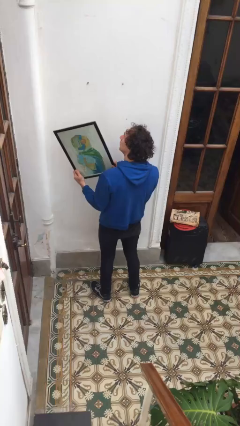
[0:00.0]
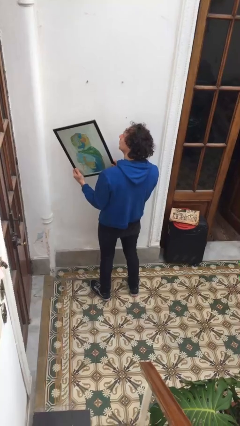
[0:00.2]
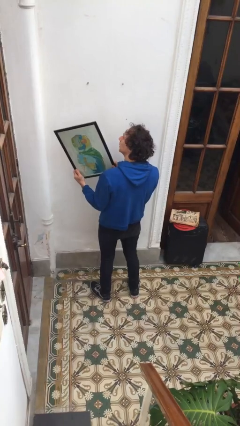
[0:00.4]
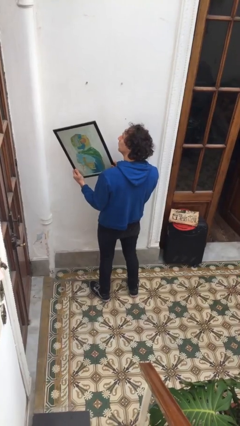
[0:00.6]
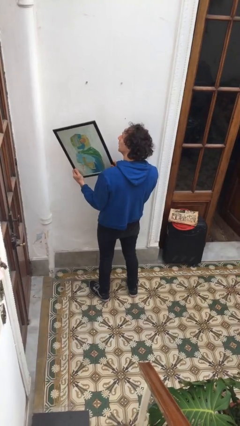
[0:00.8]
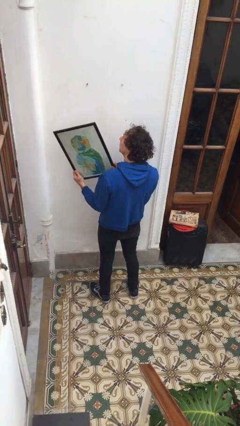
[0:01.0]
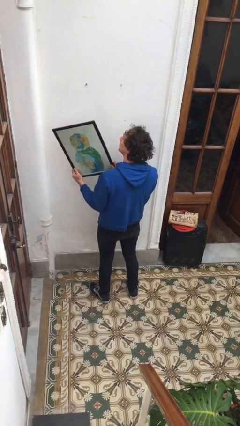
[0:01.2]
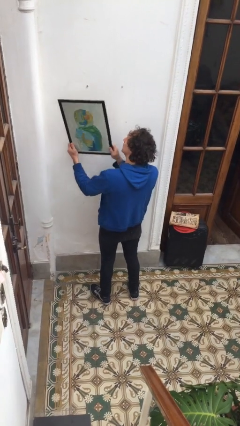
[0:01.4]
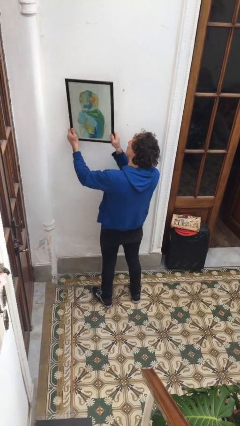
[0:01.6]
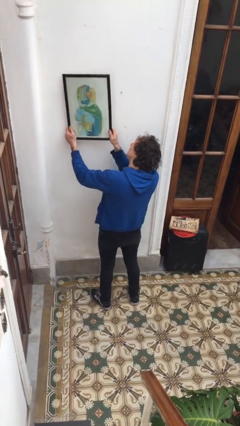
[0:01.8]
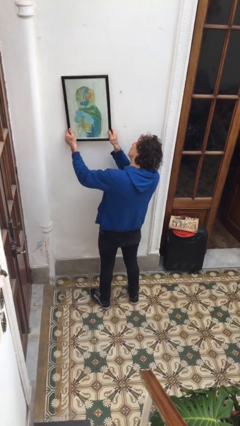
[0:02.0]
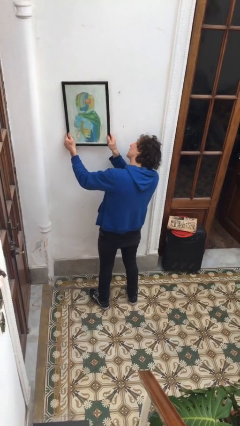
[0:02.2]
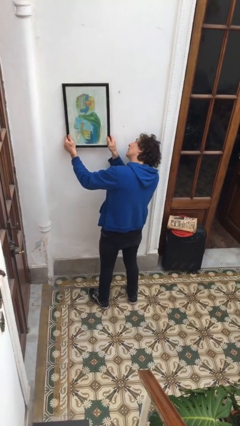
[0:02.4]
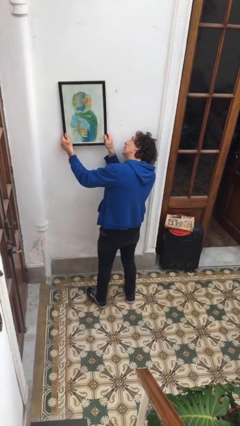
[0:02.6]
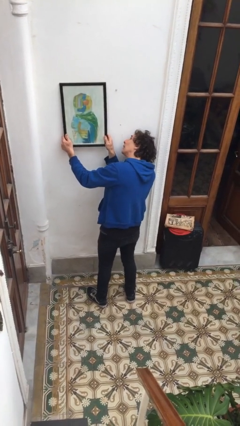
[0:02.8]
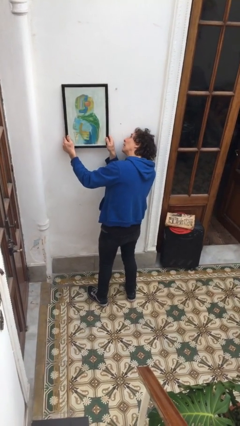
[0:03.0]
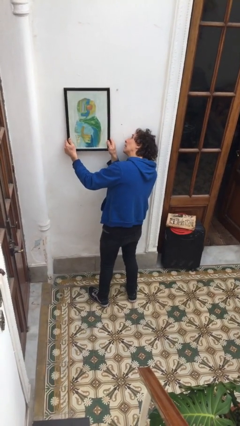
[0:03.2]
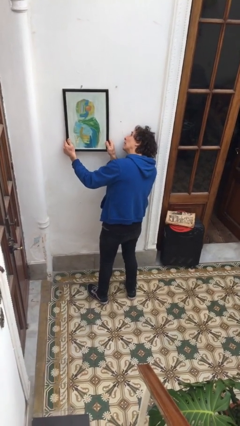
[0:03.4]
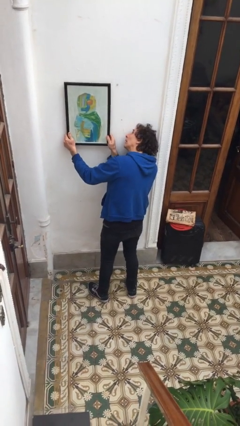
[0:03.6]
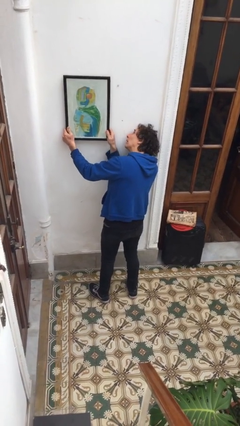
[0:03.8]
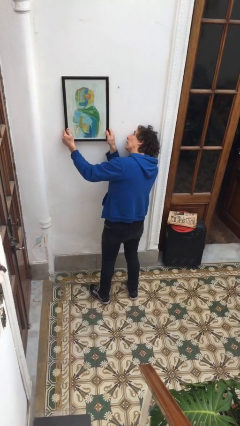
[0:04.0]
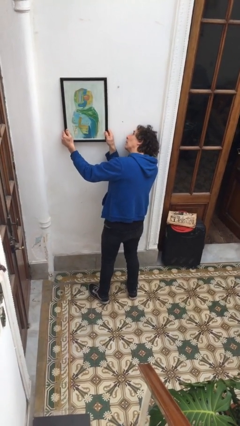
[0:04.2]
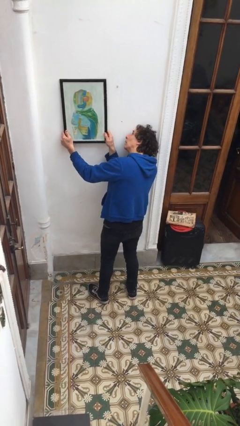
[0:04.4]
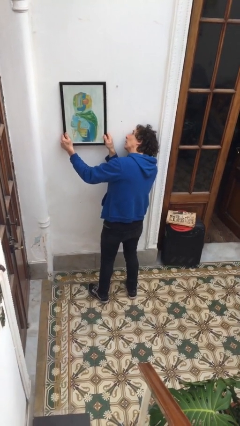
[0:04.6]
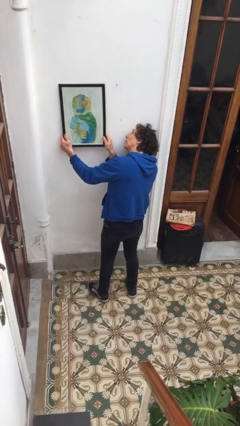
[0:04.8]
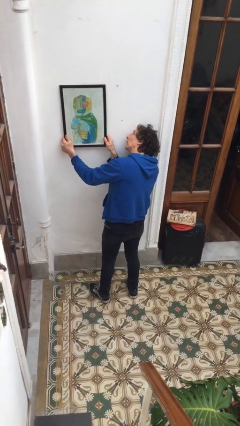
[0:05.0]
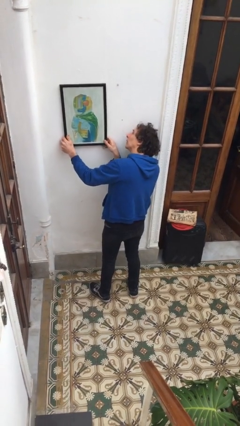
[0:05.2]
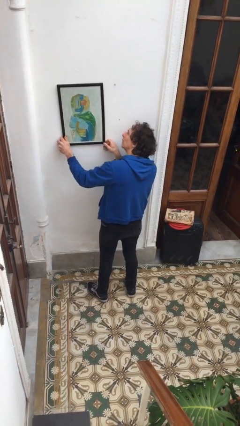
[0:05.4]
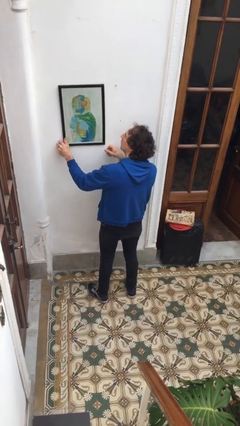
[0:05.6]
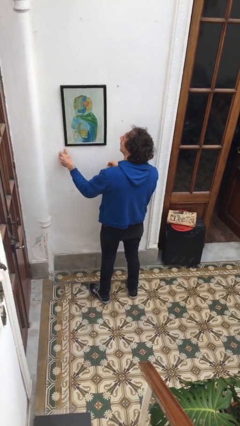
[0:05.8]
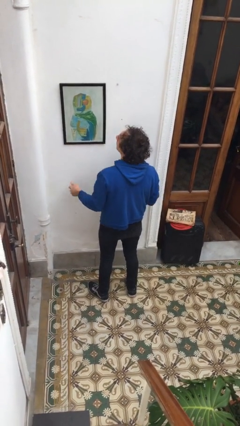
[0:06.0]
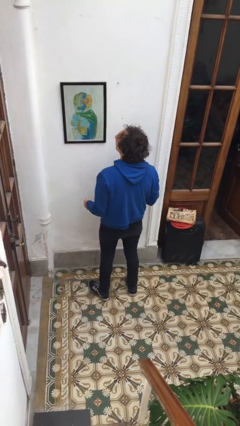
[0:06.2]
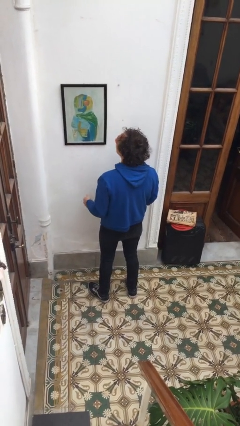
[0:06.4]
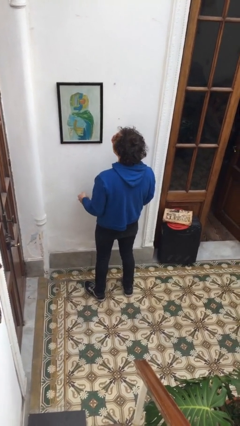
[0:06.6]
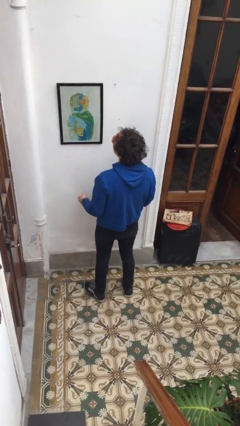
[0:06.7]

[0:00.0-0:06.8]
person puts up picture frame

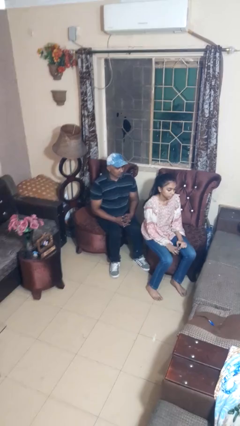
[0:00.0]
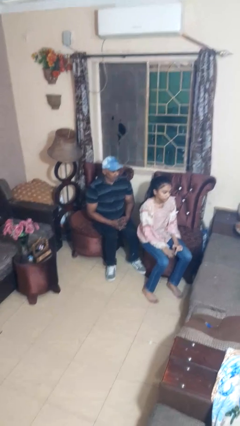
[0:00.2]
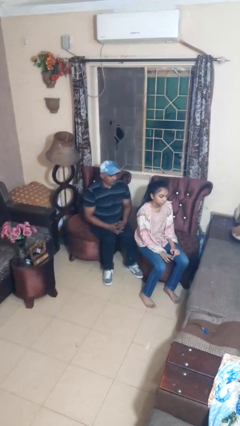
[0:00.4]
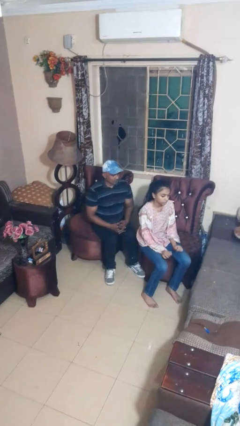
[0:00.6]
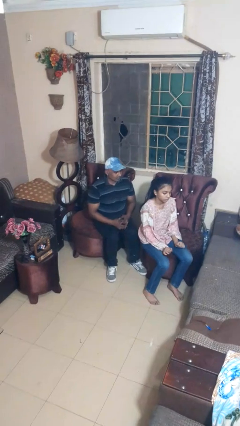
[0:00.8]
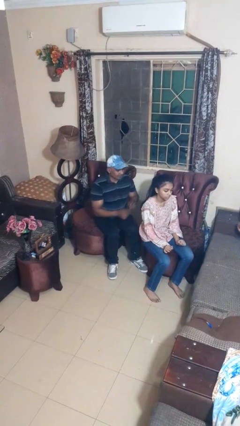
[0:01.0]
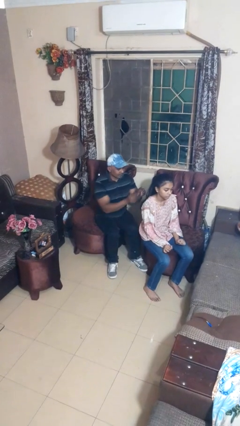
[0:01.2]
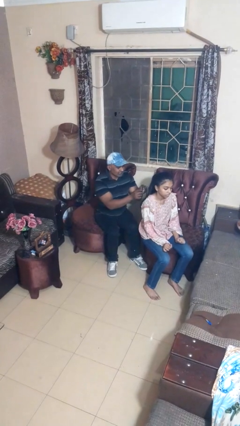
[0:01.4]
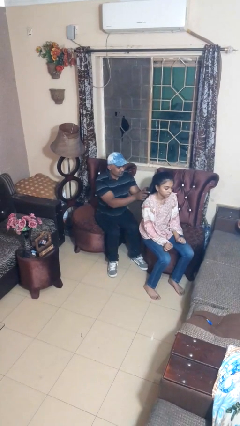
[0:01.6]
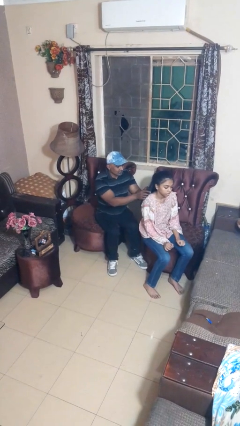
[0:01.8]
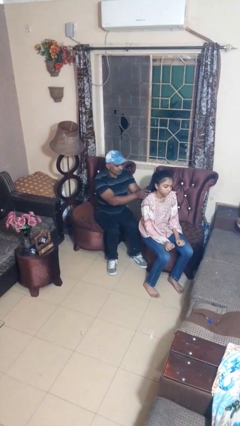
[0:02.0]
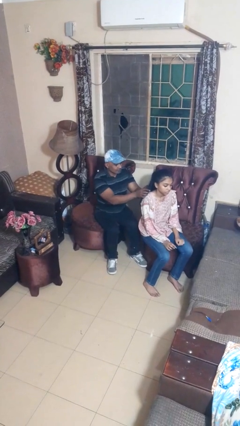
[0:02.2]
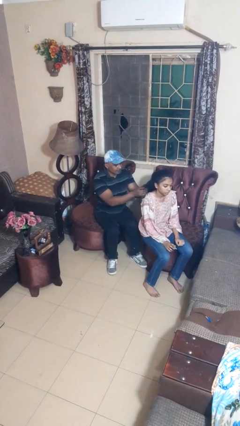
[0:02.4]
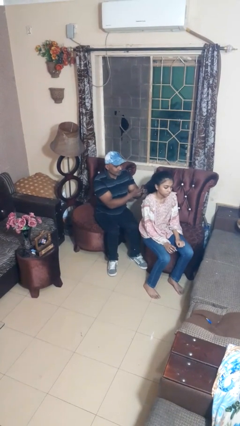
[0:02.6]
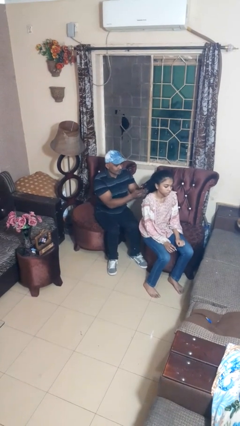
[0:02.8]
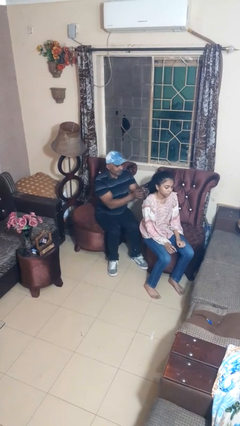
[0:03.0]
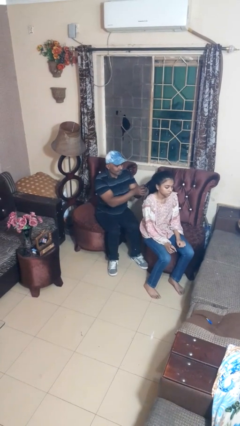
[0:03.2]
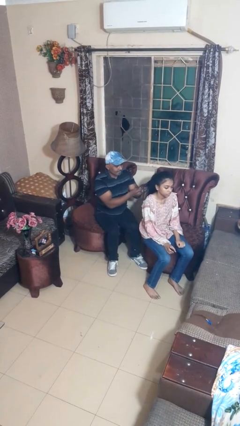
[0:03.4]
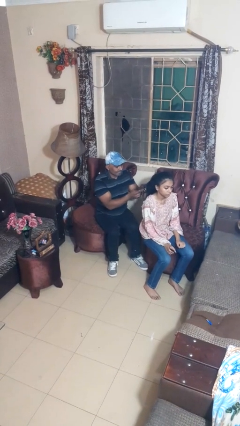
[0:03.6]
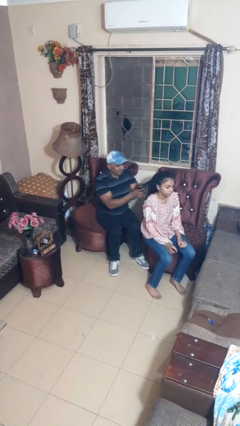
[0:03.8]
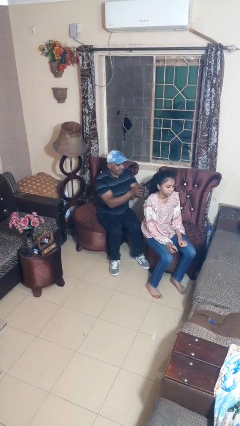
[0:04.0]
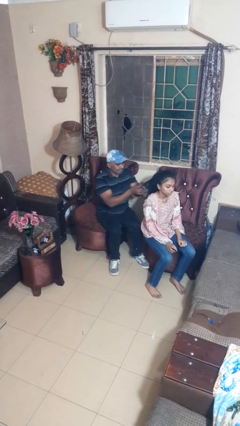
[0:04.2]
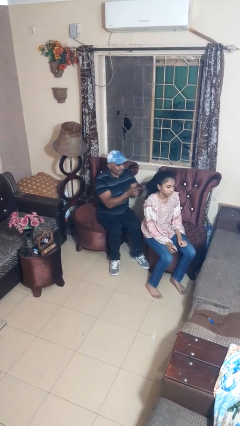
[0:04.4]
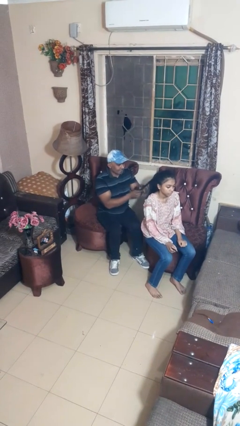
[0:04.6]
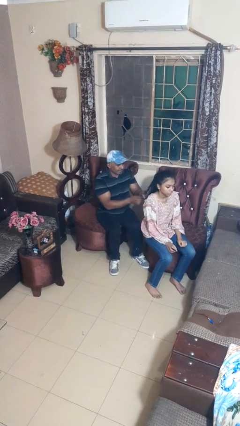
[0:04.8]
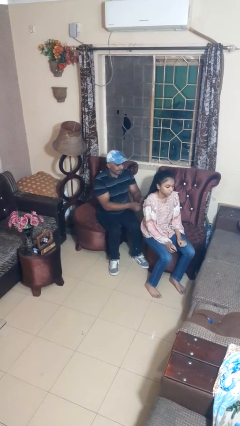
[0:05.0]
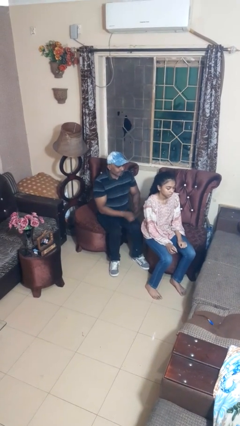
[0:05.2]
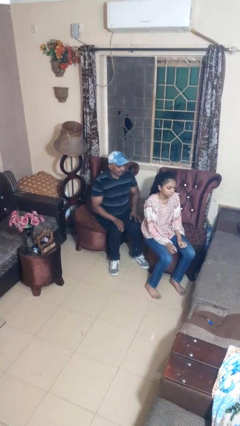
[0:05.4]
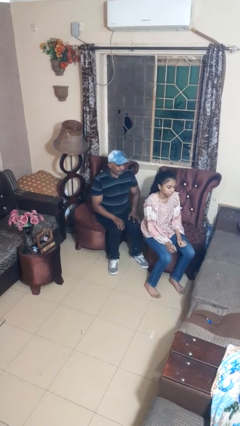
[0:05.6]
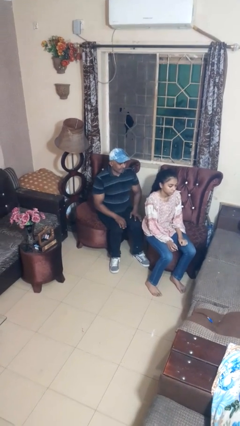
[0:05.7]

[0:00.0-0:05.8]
person braids hair of person

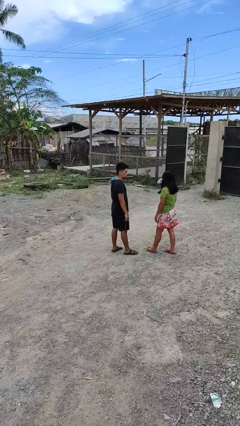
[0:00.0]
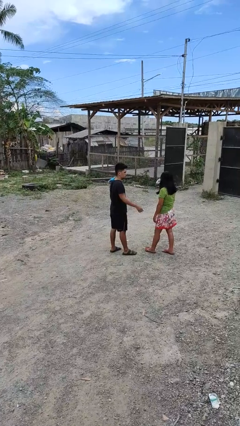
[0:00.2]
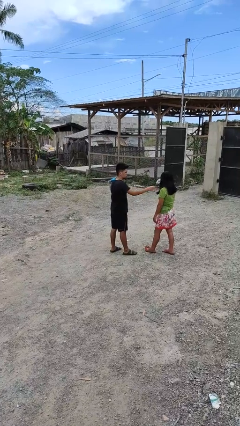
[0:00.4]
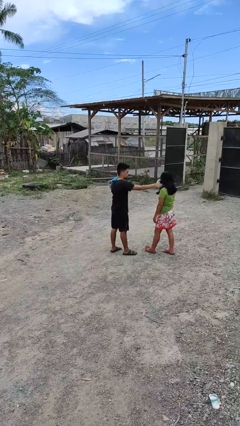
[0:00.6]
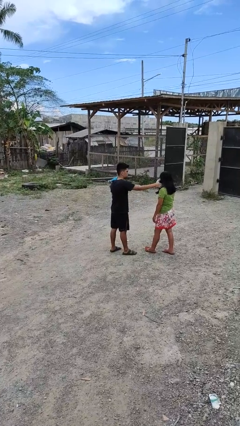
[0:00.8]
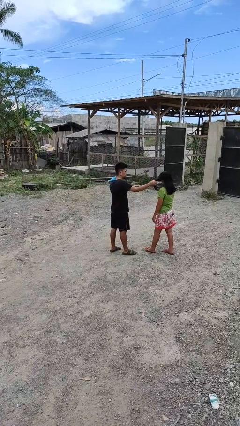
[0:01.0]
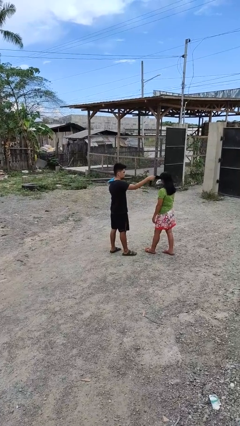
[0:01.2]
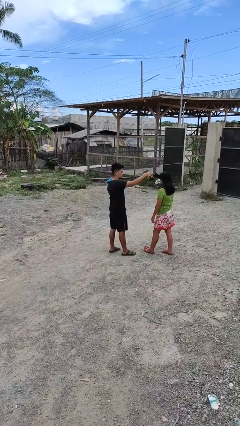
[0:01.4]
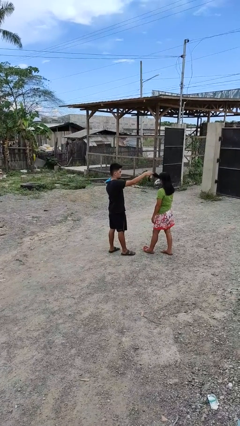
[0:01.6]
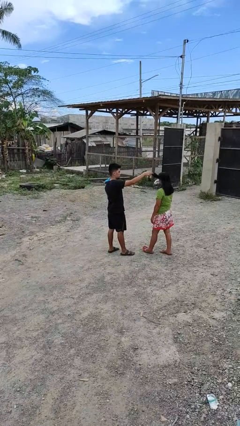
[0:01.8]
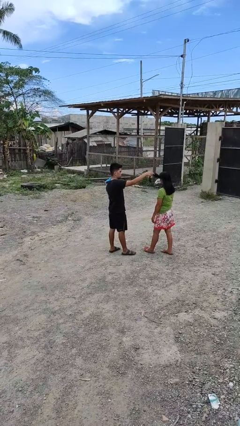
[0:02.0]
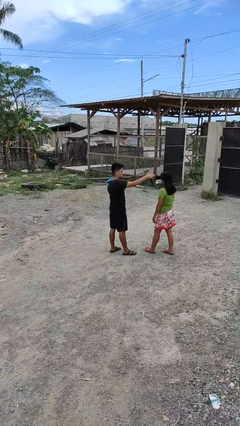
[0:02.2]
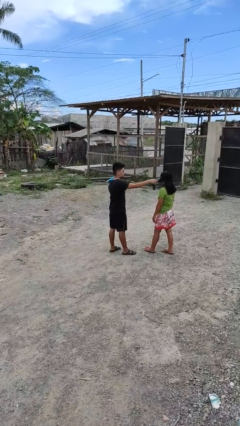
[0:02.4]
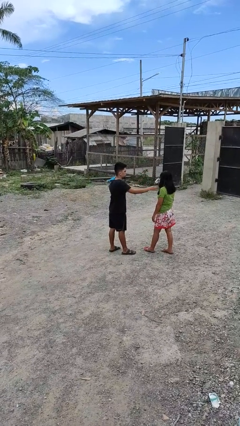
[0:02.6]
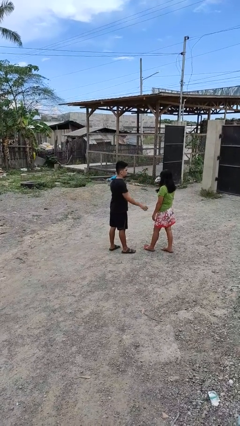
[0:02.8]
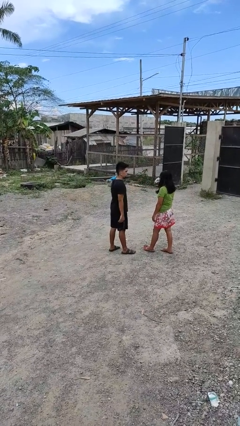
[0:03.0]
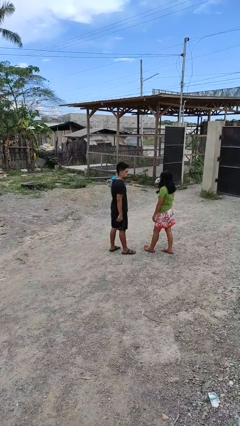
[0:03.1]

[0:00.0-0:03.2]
person grabs person by hair

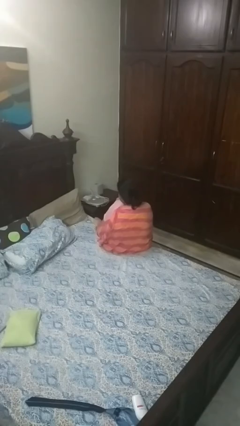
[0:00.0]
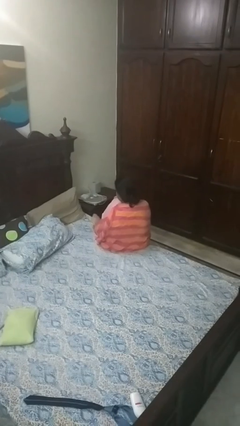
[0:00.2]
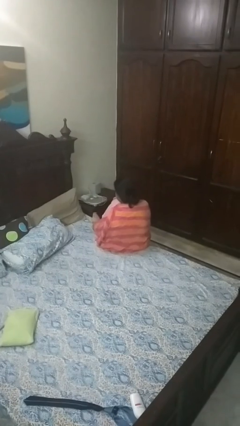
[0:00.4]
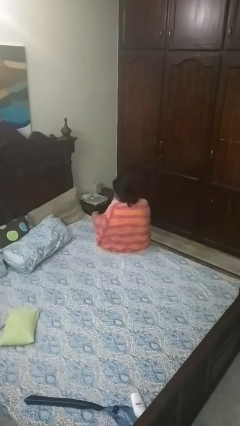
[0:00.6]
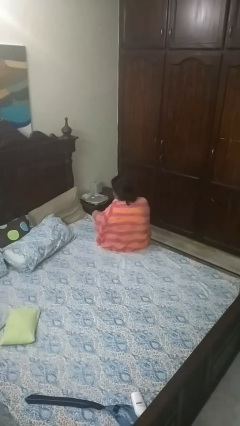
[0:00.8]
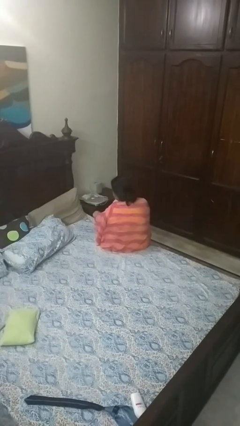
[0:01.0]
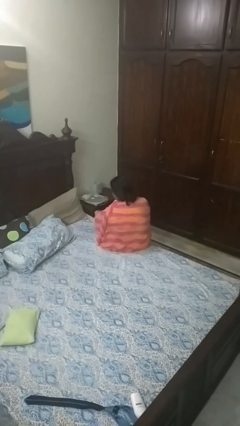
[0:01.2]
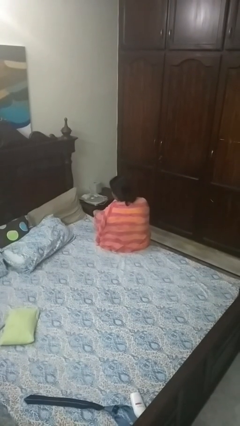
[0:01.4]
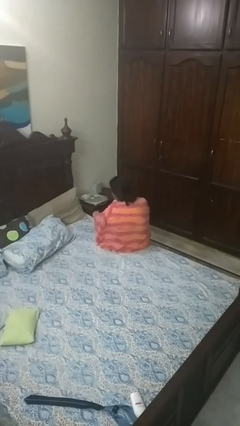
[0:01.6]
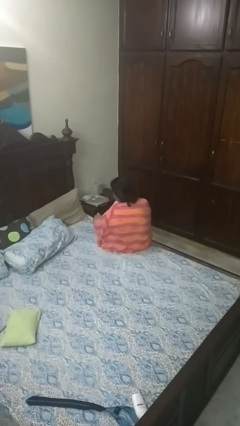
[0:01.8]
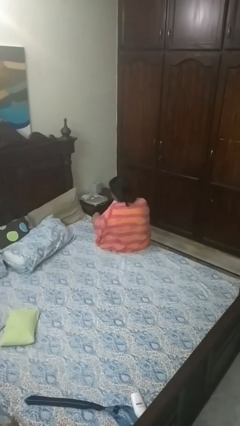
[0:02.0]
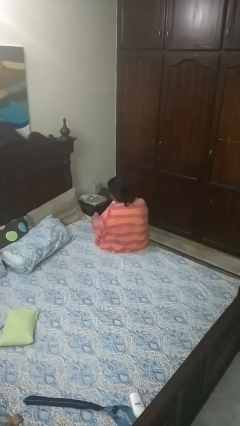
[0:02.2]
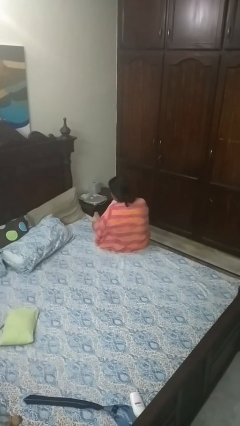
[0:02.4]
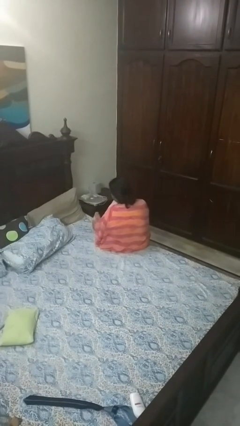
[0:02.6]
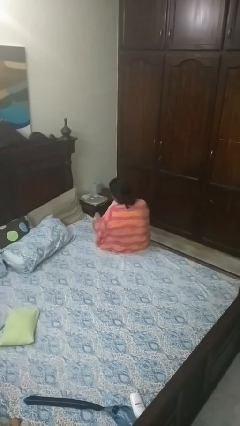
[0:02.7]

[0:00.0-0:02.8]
person rubs foot
